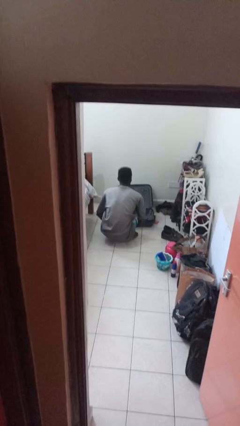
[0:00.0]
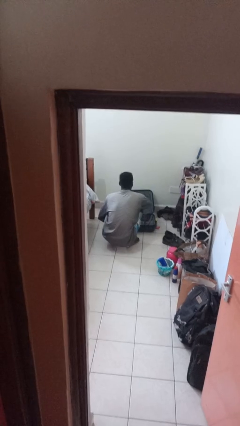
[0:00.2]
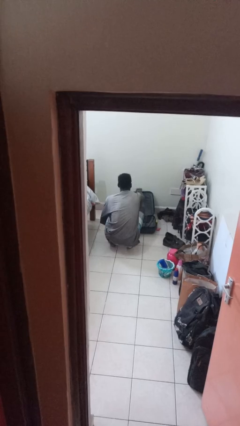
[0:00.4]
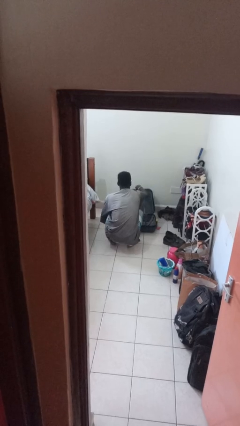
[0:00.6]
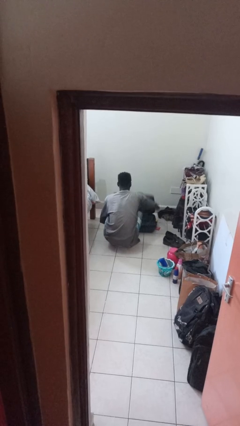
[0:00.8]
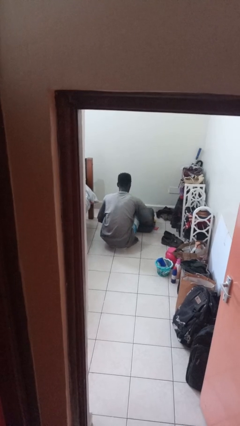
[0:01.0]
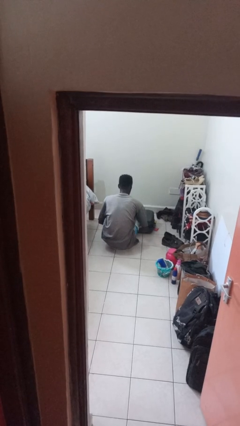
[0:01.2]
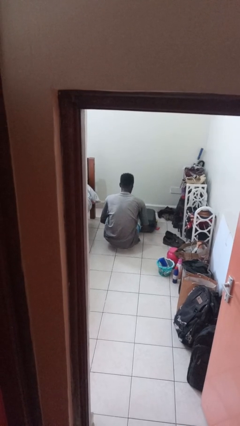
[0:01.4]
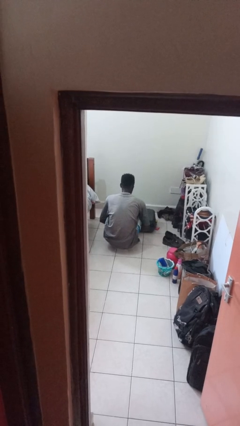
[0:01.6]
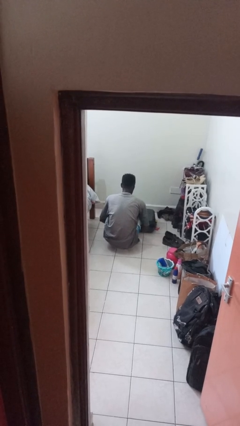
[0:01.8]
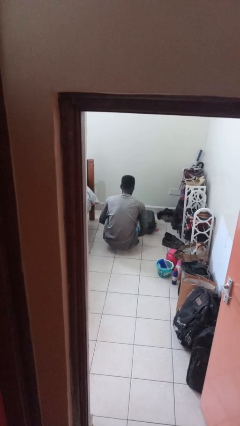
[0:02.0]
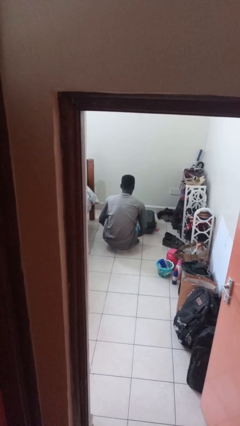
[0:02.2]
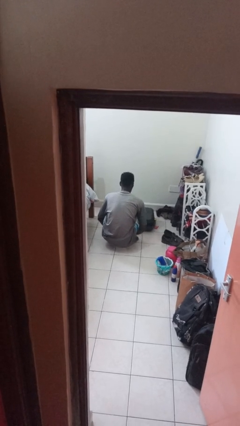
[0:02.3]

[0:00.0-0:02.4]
person closes suitcase

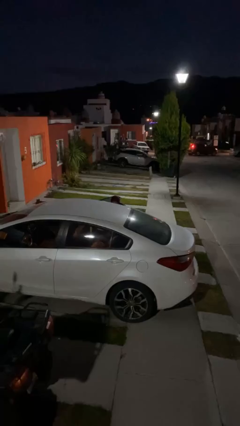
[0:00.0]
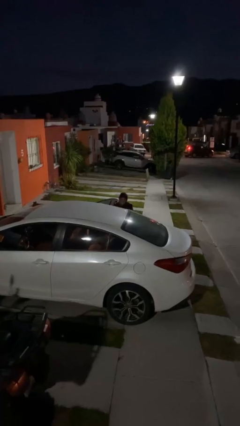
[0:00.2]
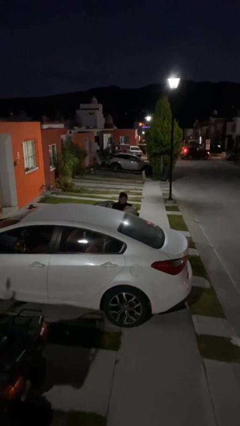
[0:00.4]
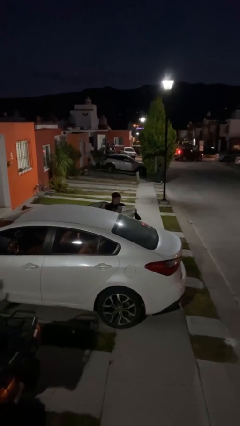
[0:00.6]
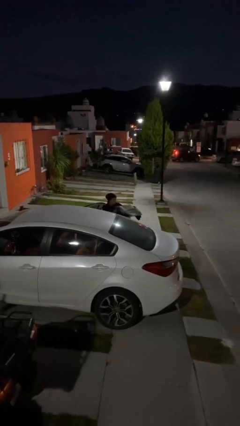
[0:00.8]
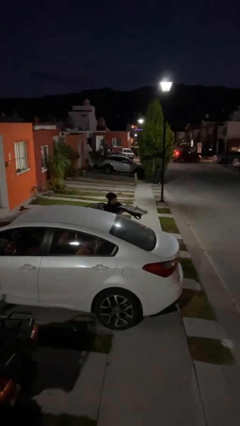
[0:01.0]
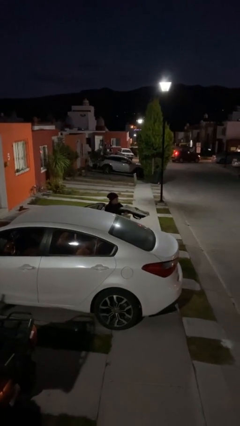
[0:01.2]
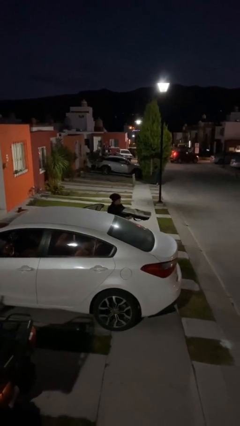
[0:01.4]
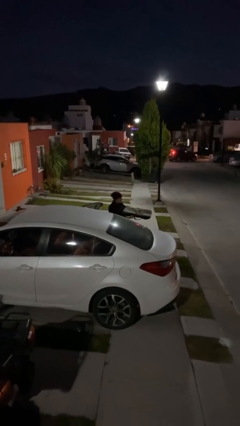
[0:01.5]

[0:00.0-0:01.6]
person unloads car

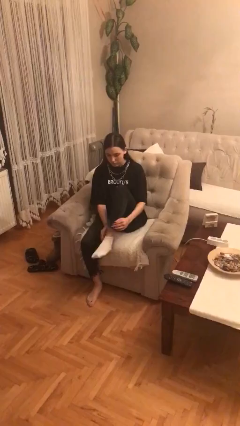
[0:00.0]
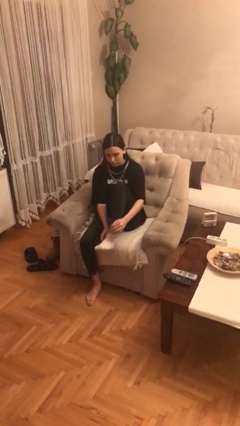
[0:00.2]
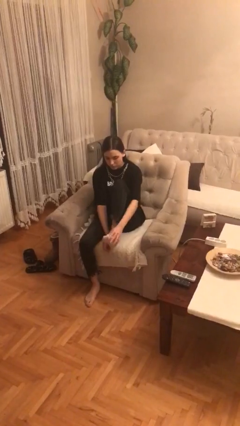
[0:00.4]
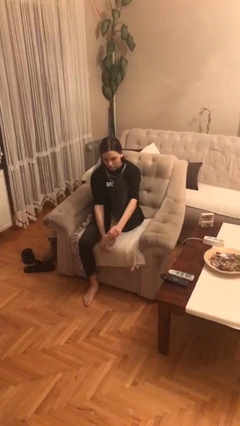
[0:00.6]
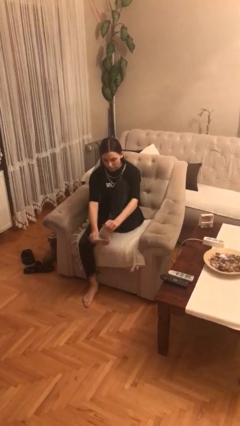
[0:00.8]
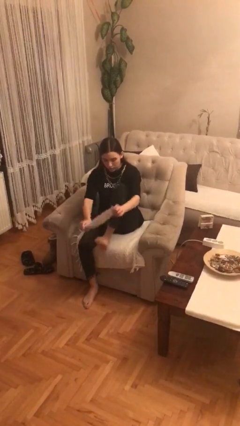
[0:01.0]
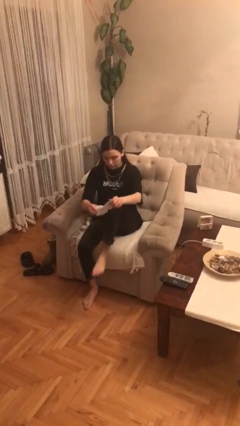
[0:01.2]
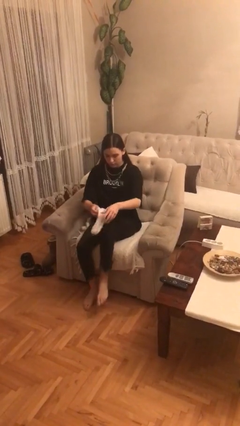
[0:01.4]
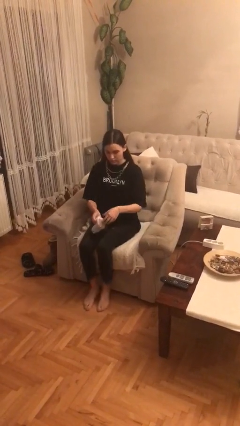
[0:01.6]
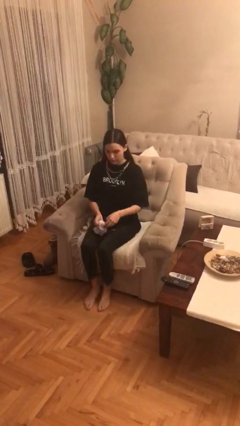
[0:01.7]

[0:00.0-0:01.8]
person takes off socks

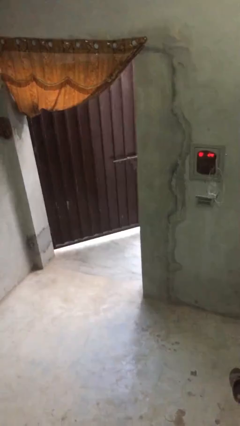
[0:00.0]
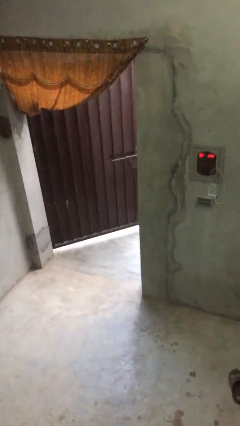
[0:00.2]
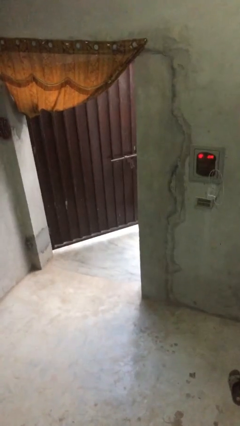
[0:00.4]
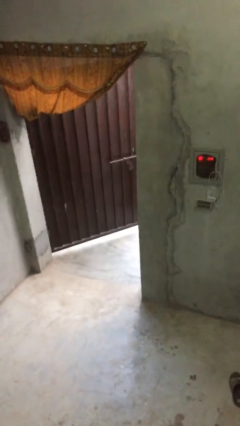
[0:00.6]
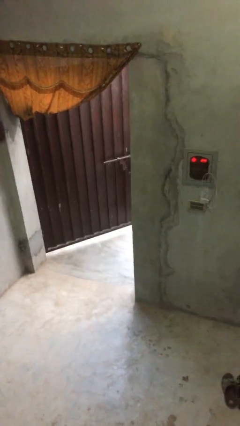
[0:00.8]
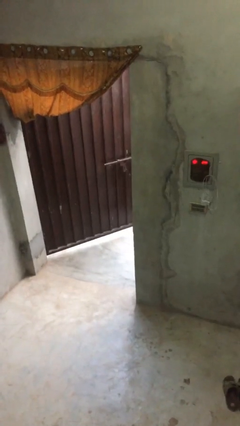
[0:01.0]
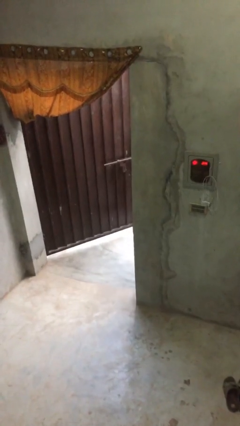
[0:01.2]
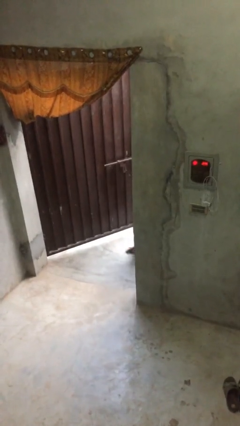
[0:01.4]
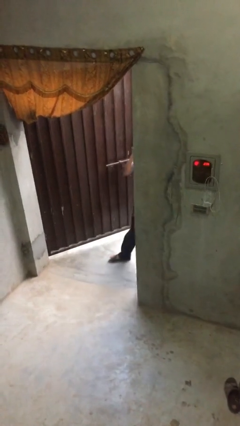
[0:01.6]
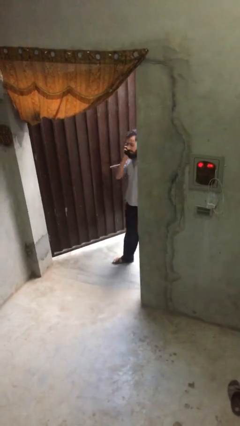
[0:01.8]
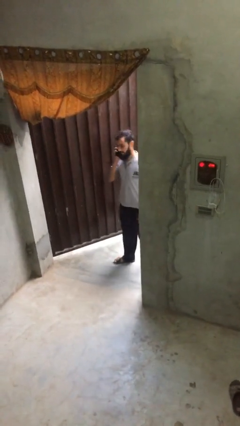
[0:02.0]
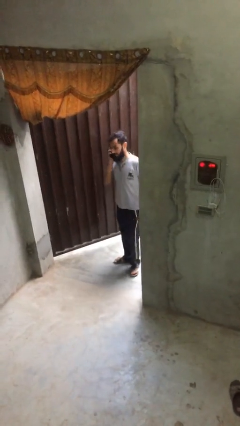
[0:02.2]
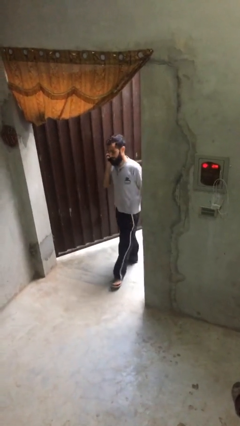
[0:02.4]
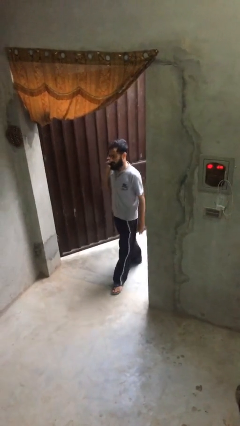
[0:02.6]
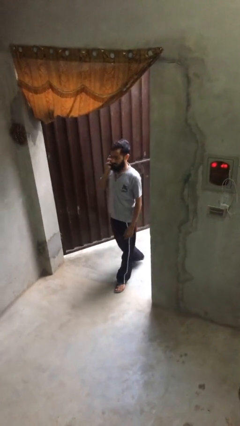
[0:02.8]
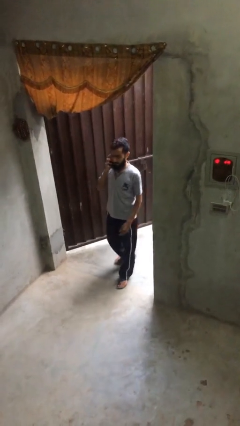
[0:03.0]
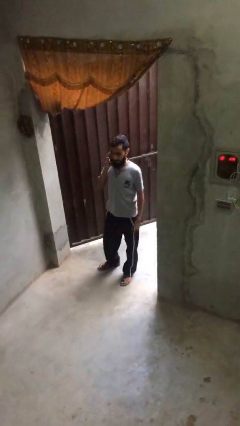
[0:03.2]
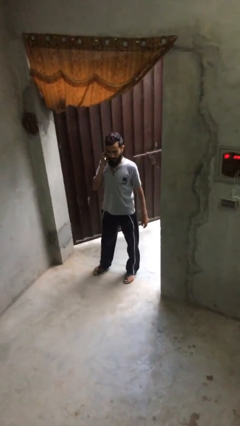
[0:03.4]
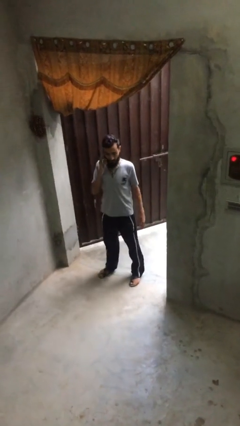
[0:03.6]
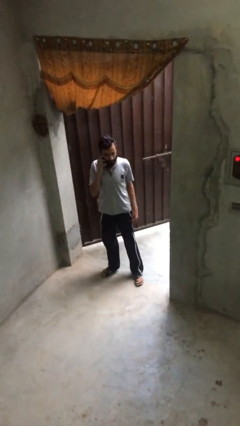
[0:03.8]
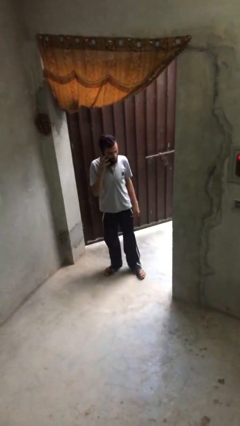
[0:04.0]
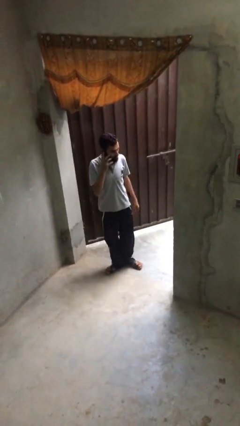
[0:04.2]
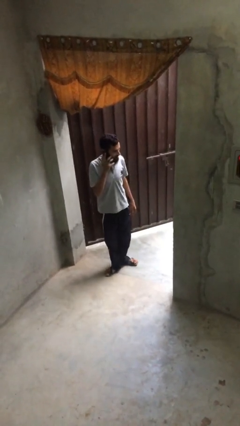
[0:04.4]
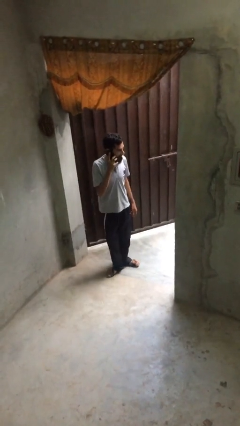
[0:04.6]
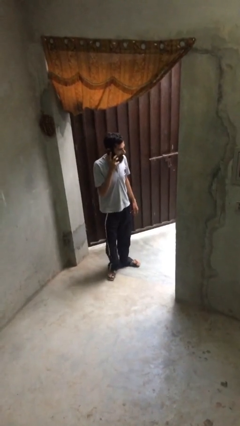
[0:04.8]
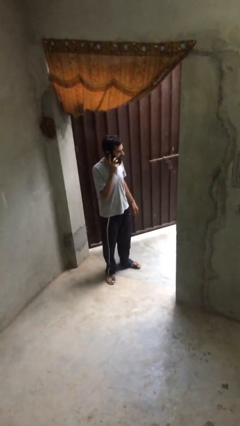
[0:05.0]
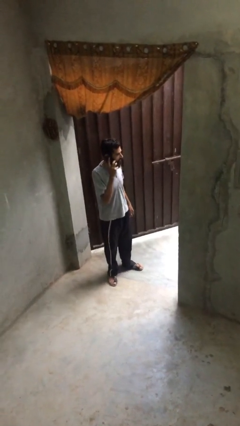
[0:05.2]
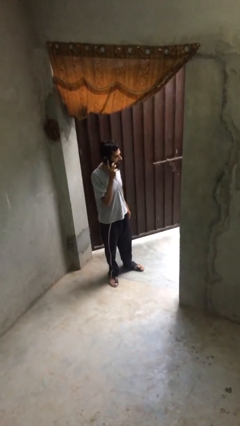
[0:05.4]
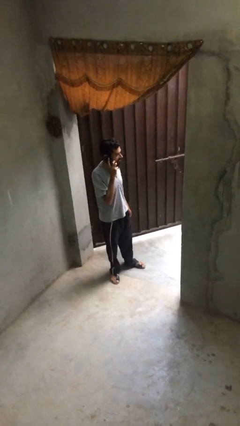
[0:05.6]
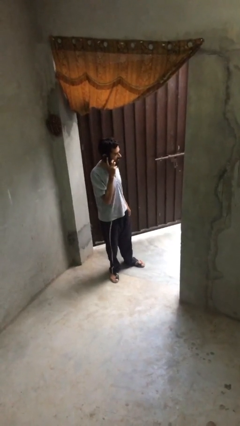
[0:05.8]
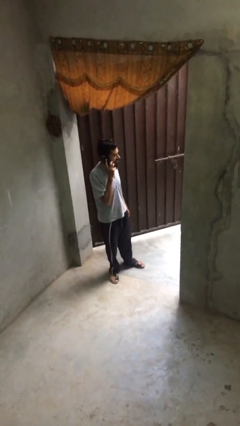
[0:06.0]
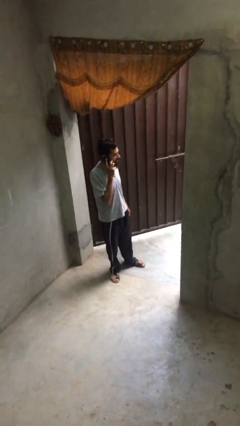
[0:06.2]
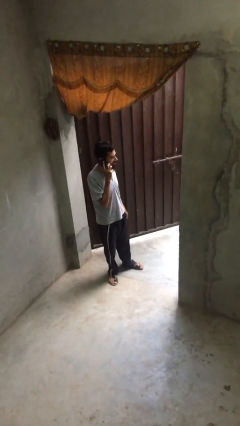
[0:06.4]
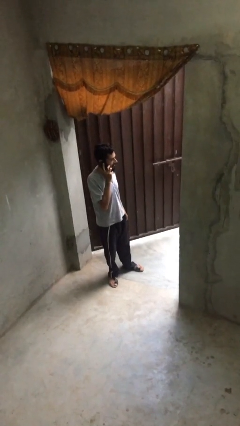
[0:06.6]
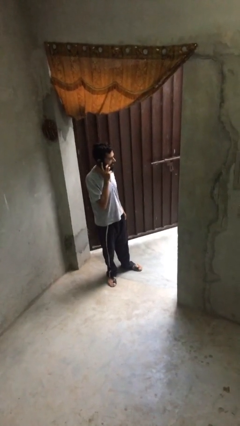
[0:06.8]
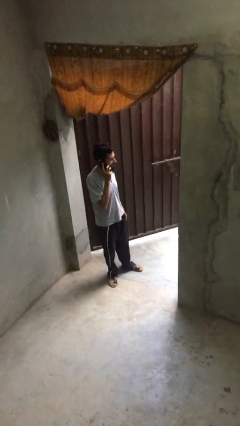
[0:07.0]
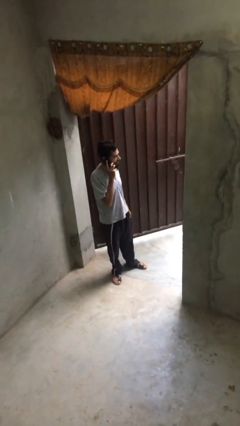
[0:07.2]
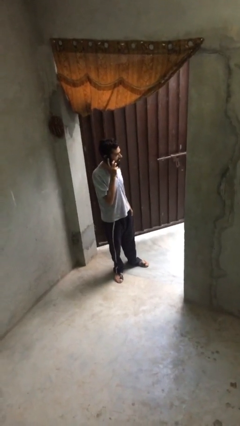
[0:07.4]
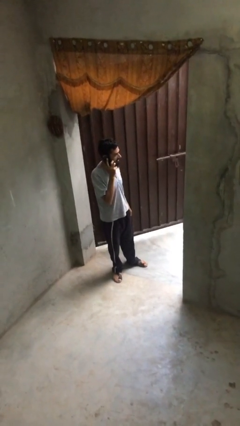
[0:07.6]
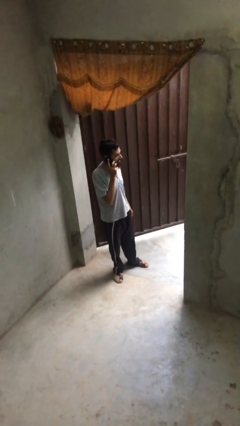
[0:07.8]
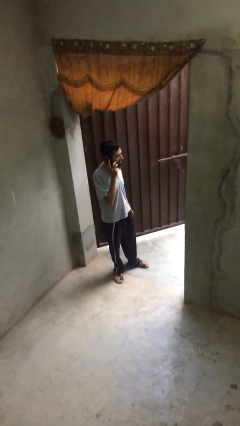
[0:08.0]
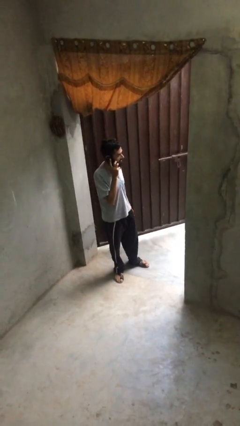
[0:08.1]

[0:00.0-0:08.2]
person enters scene through structure

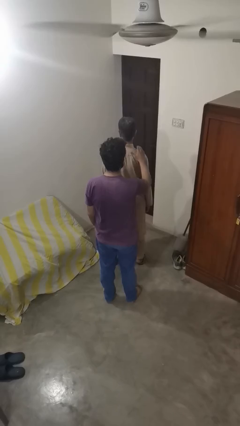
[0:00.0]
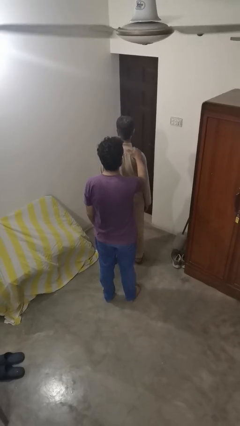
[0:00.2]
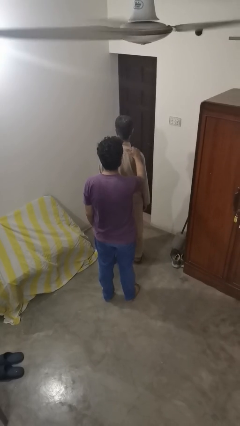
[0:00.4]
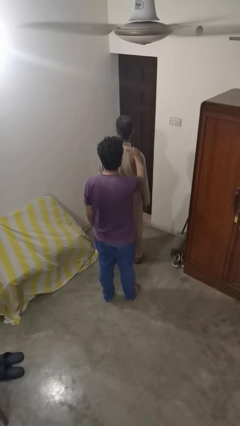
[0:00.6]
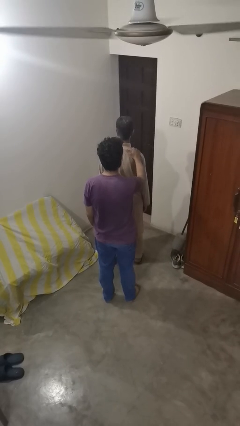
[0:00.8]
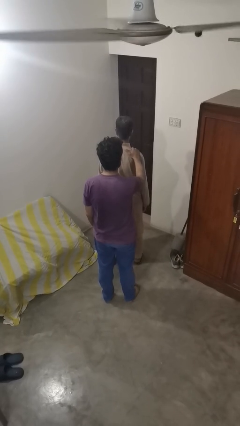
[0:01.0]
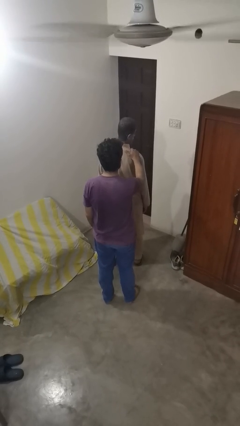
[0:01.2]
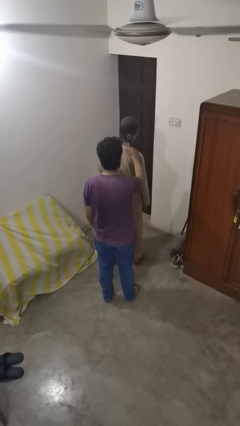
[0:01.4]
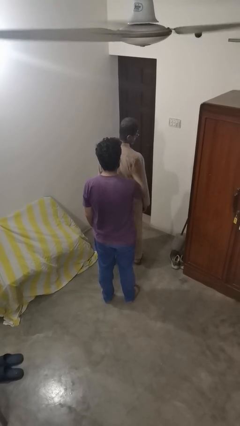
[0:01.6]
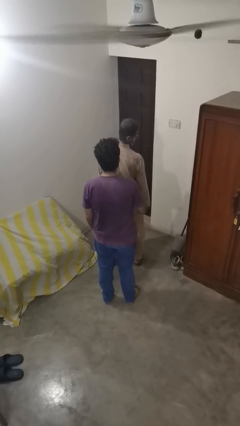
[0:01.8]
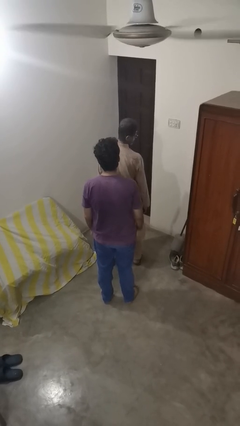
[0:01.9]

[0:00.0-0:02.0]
person grabs person by shoulder

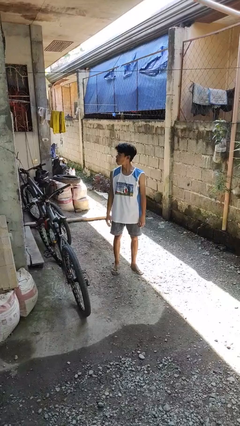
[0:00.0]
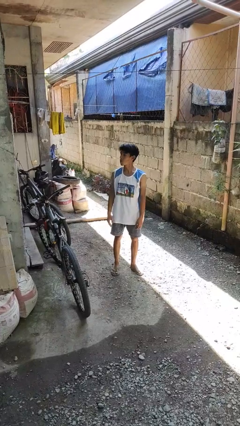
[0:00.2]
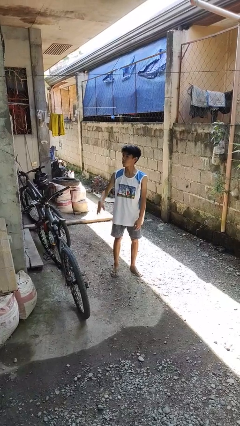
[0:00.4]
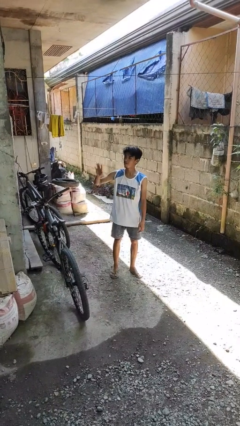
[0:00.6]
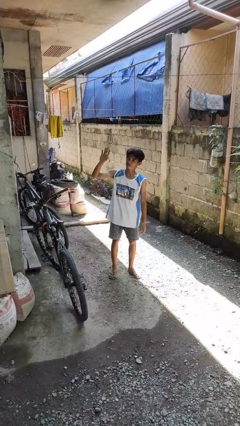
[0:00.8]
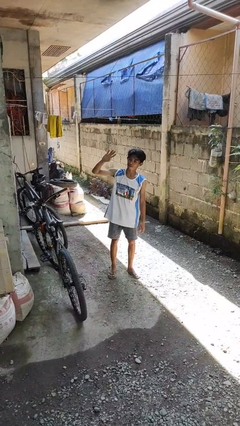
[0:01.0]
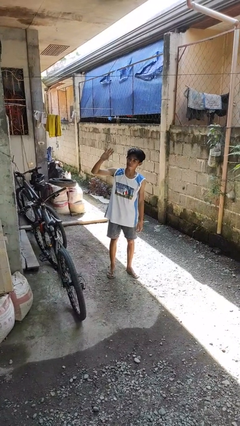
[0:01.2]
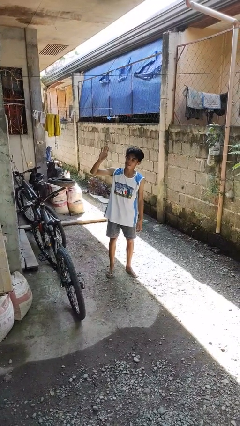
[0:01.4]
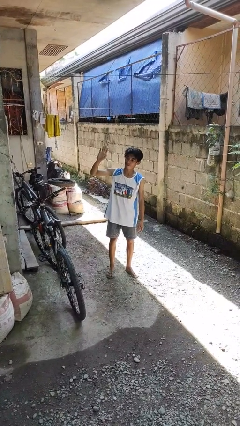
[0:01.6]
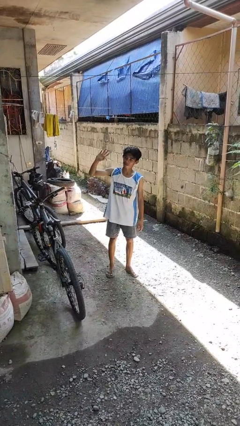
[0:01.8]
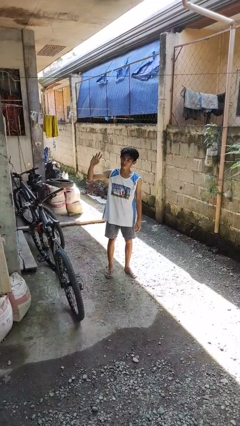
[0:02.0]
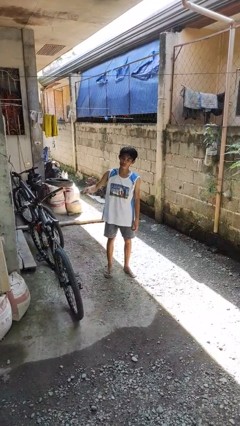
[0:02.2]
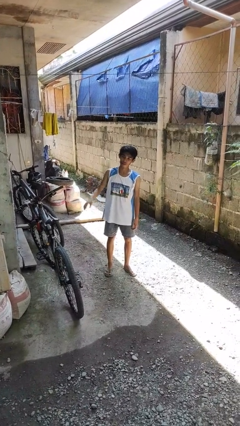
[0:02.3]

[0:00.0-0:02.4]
person waves at person
